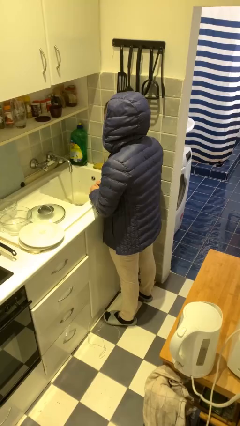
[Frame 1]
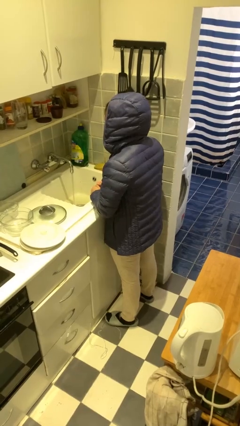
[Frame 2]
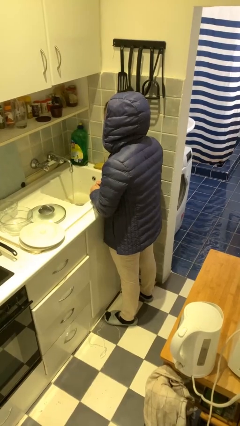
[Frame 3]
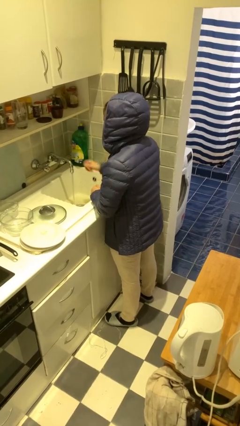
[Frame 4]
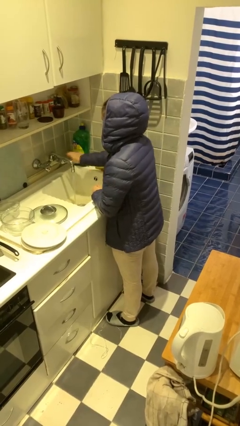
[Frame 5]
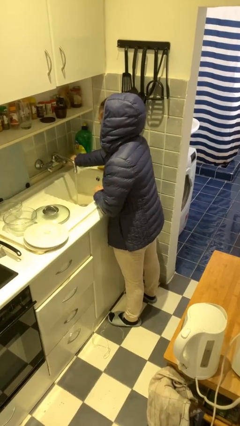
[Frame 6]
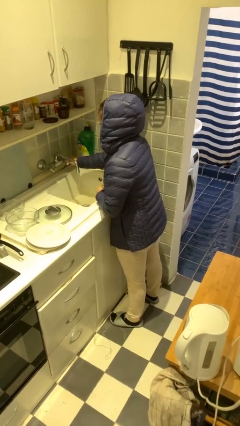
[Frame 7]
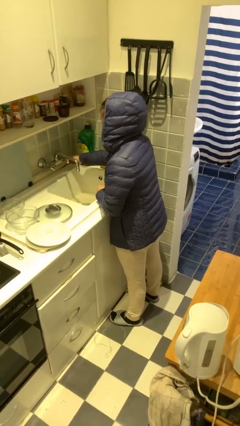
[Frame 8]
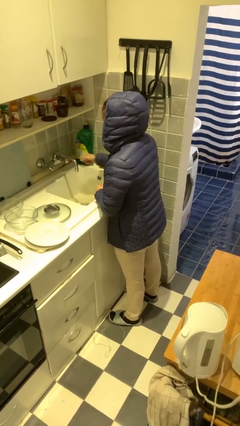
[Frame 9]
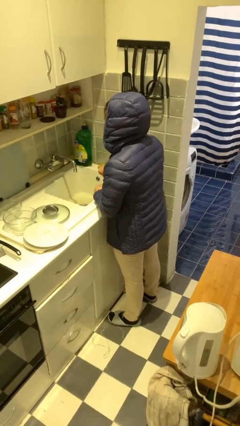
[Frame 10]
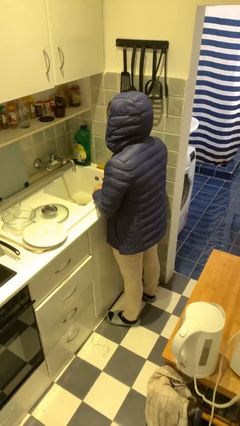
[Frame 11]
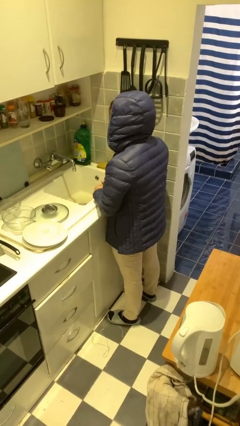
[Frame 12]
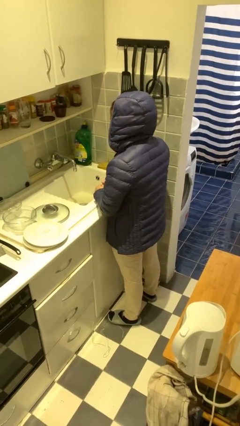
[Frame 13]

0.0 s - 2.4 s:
person turns off faucet

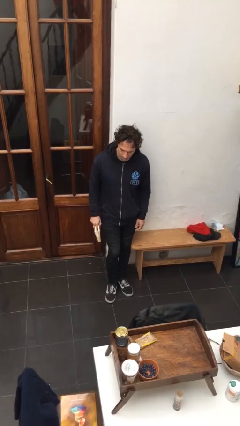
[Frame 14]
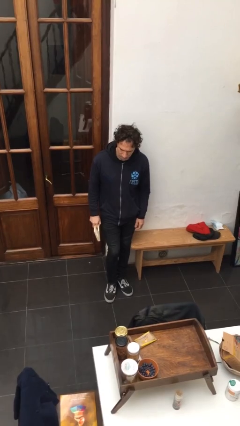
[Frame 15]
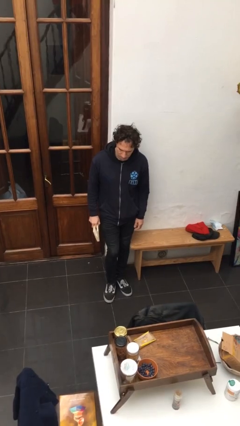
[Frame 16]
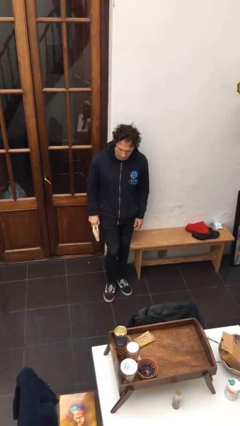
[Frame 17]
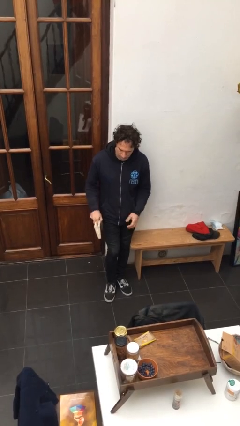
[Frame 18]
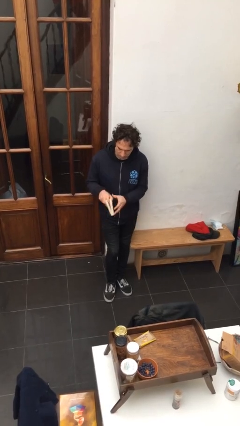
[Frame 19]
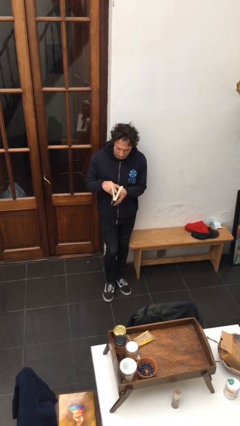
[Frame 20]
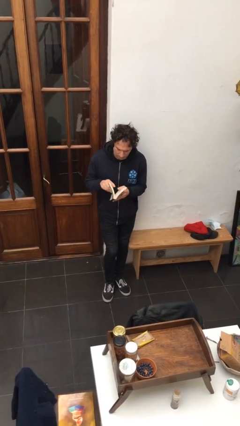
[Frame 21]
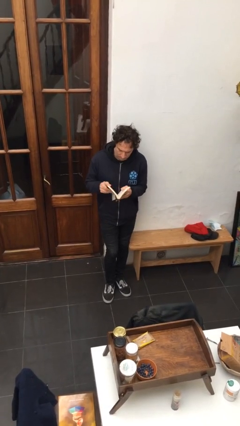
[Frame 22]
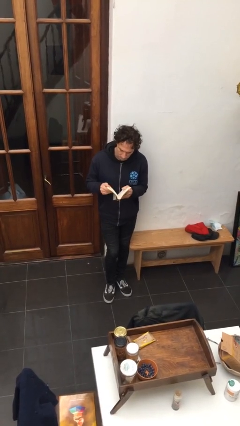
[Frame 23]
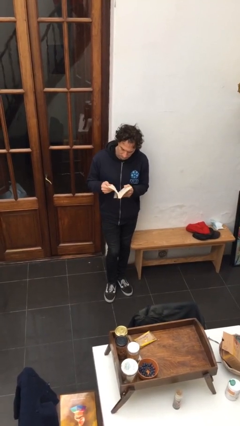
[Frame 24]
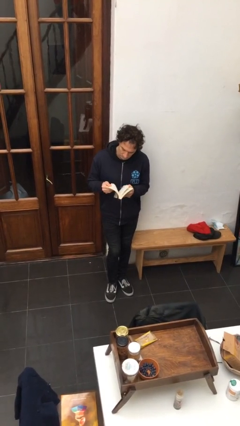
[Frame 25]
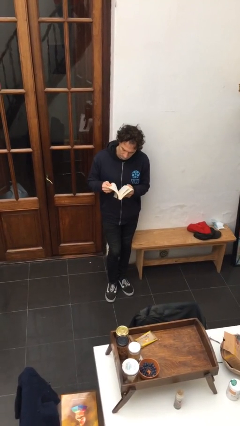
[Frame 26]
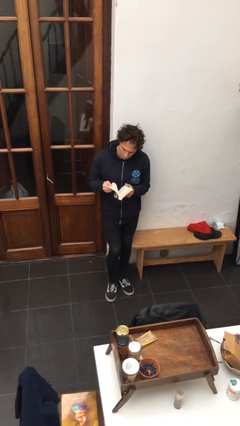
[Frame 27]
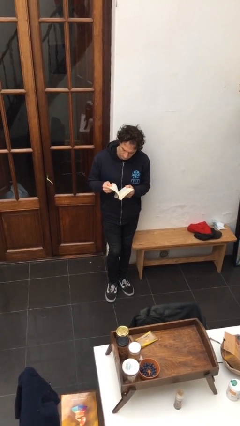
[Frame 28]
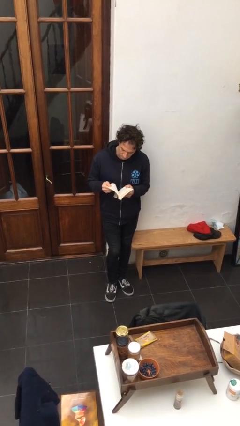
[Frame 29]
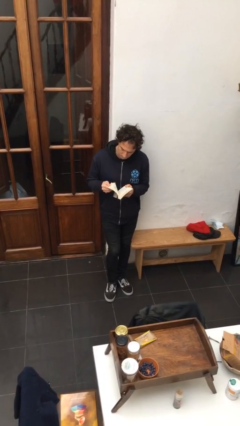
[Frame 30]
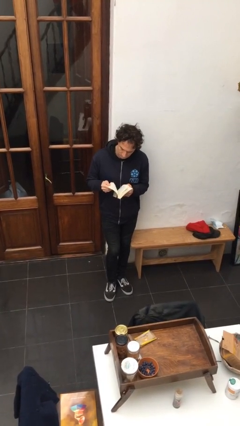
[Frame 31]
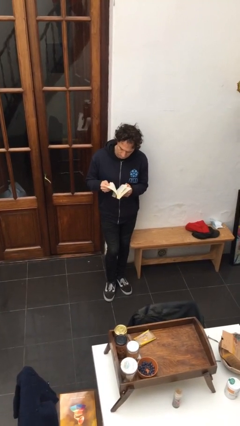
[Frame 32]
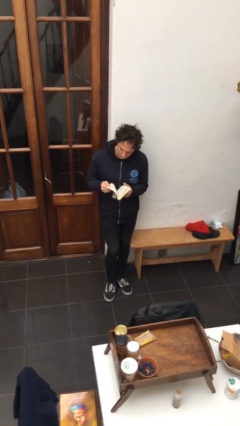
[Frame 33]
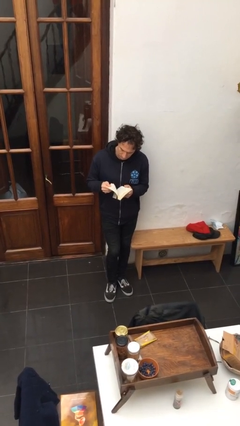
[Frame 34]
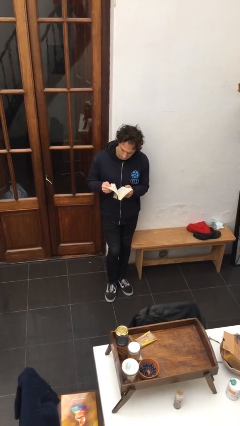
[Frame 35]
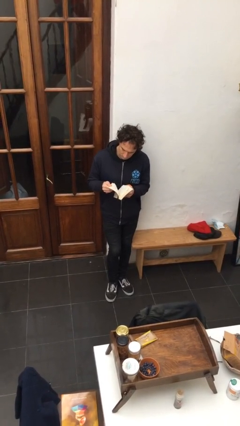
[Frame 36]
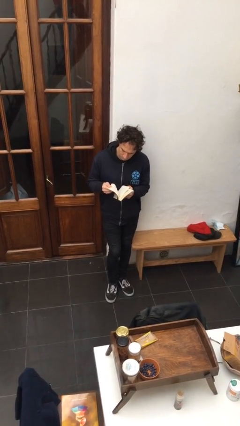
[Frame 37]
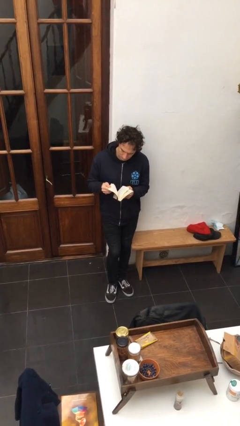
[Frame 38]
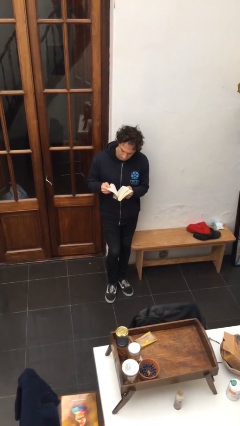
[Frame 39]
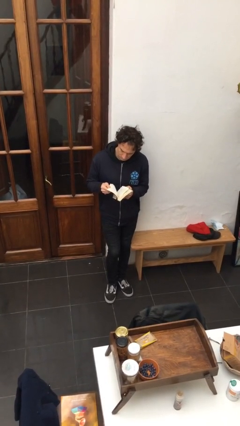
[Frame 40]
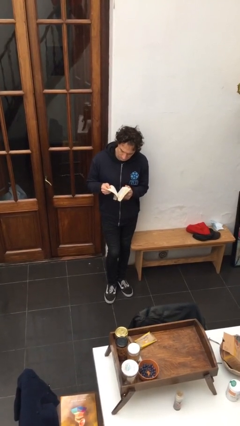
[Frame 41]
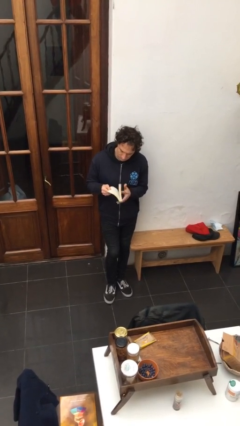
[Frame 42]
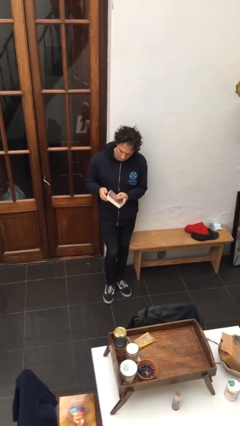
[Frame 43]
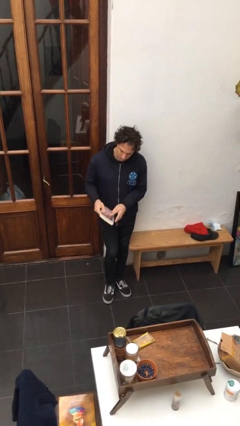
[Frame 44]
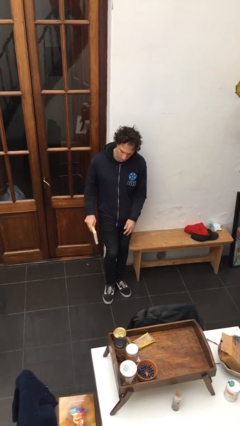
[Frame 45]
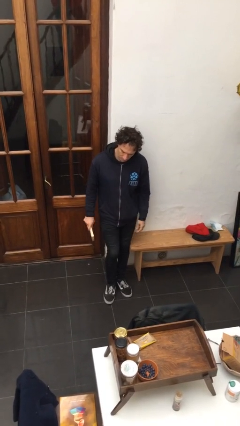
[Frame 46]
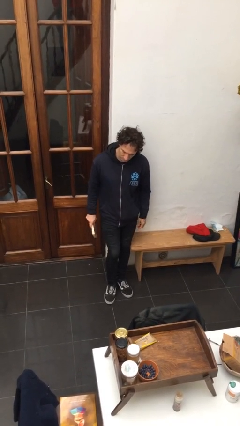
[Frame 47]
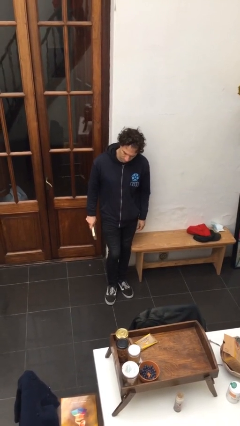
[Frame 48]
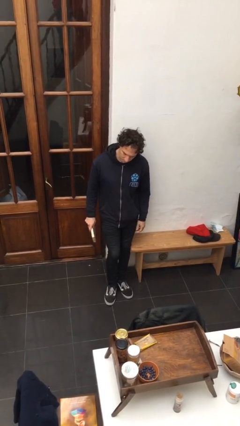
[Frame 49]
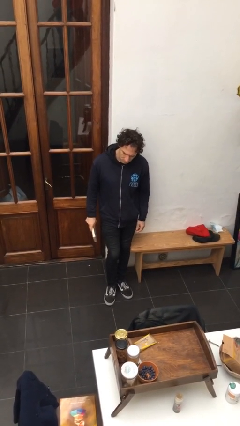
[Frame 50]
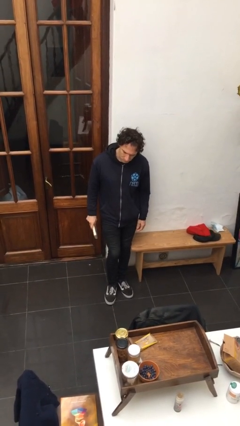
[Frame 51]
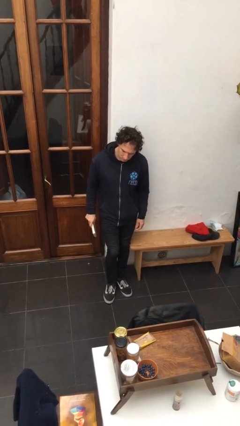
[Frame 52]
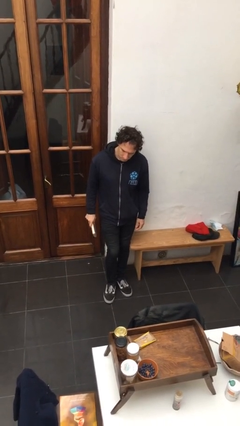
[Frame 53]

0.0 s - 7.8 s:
person reads book

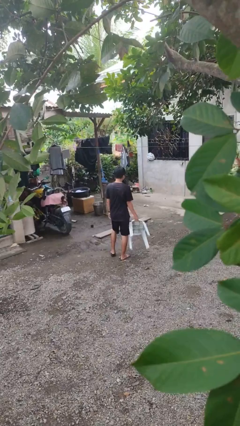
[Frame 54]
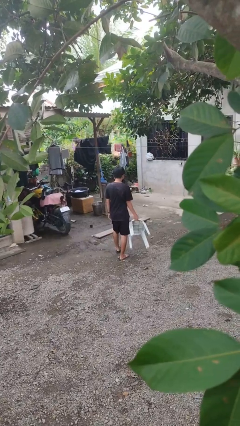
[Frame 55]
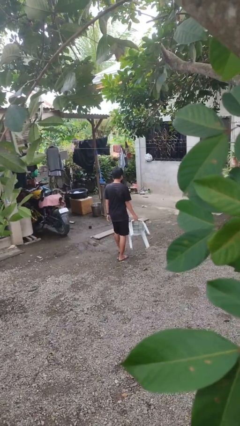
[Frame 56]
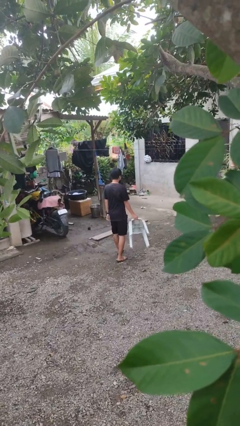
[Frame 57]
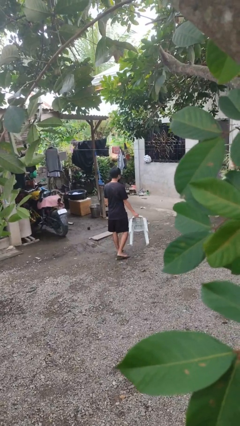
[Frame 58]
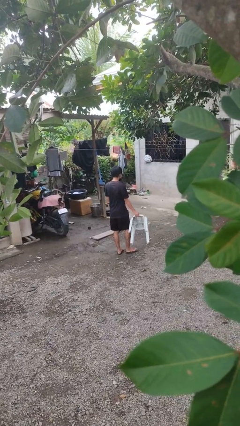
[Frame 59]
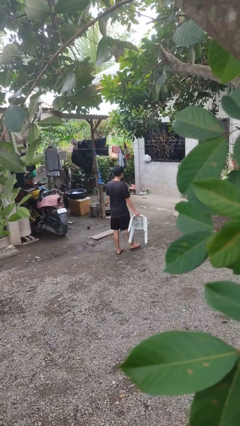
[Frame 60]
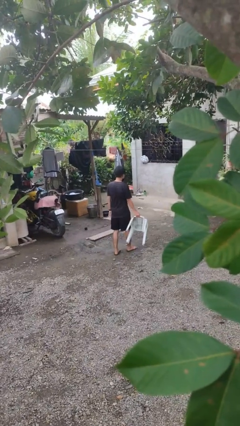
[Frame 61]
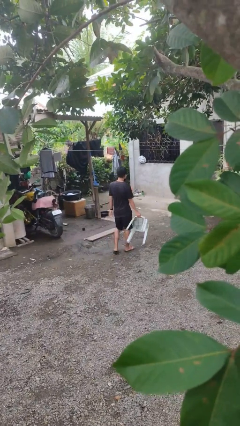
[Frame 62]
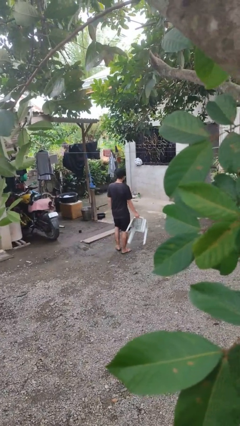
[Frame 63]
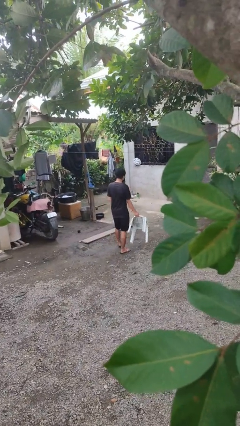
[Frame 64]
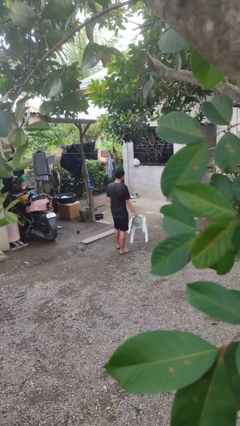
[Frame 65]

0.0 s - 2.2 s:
person carries furniture

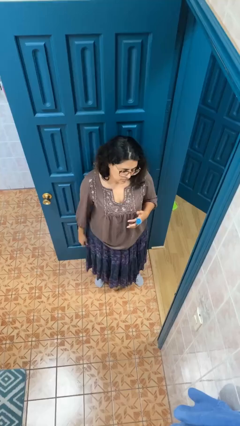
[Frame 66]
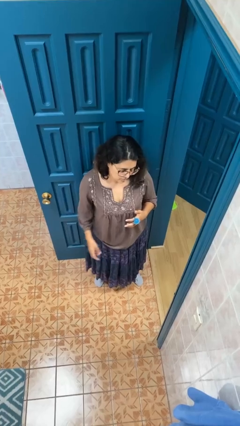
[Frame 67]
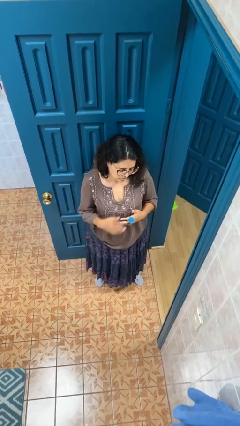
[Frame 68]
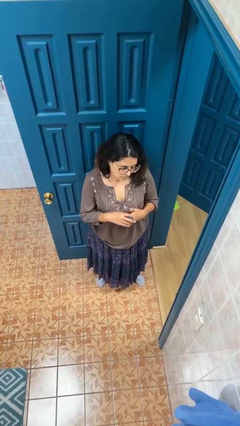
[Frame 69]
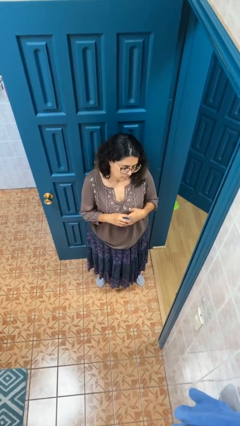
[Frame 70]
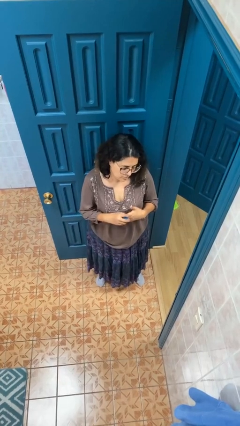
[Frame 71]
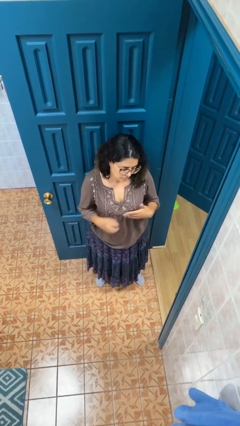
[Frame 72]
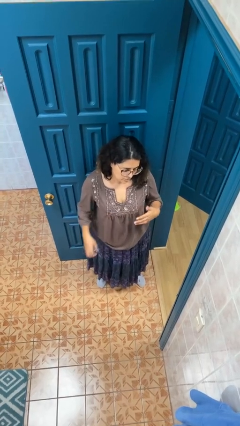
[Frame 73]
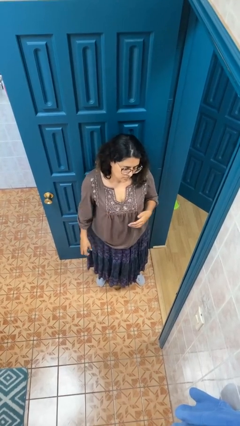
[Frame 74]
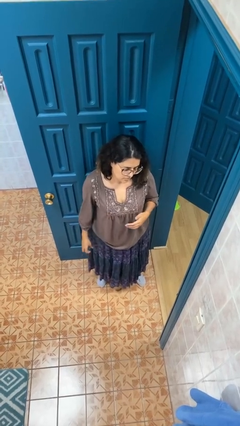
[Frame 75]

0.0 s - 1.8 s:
person takes off ring

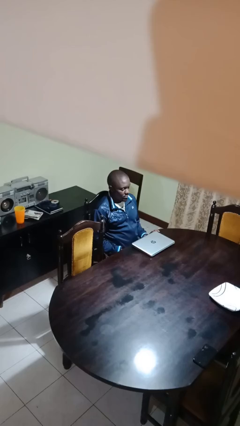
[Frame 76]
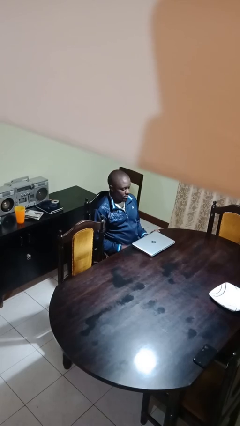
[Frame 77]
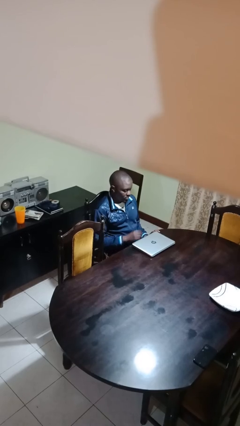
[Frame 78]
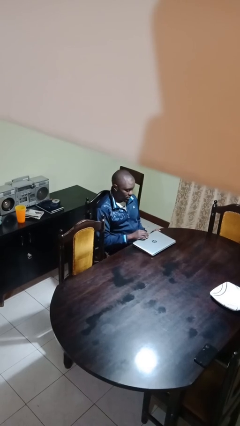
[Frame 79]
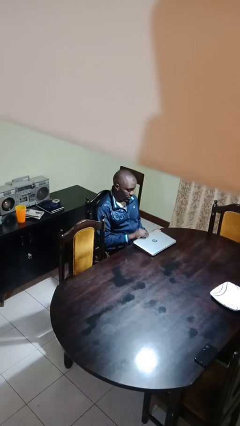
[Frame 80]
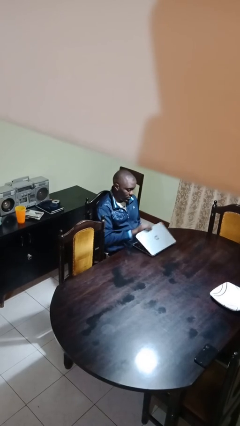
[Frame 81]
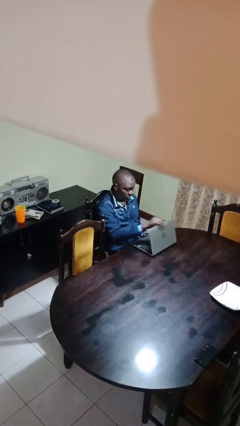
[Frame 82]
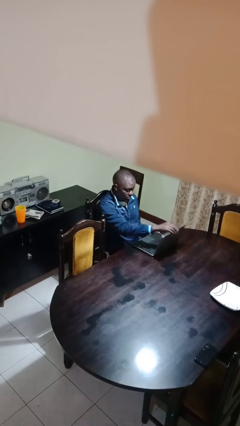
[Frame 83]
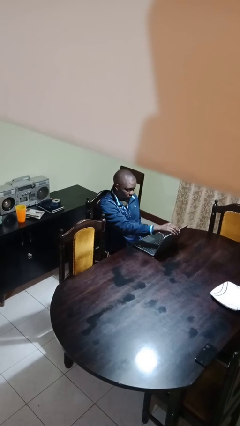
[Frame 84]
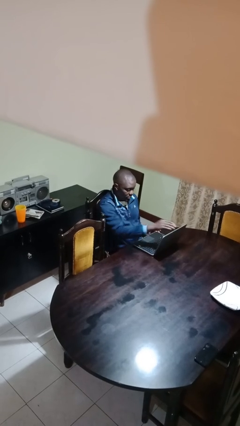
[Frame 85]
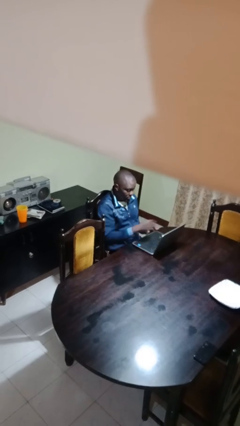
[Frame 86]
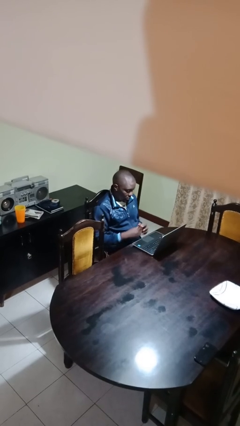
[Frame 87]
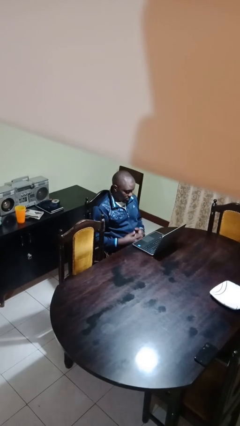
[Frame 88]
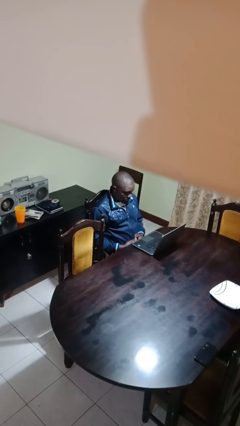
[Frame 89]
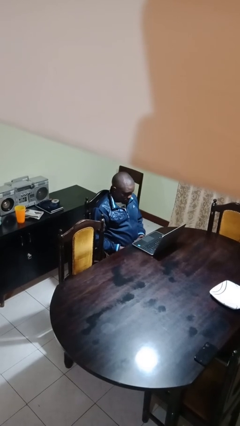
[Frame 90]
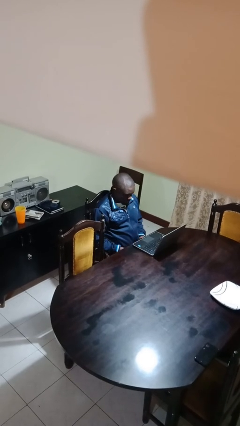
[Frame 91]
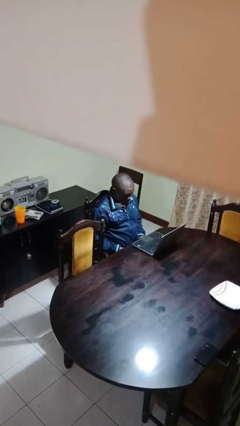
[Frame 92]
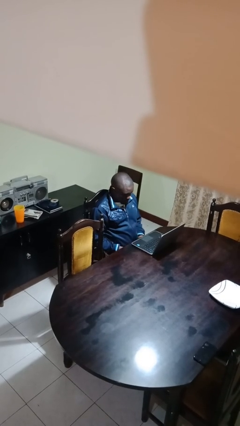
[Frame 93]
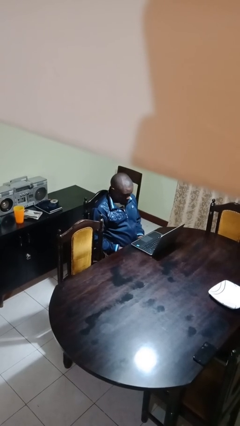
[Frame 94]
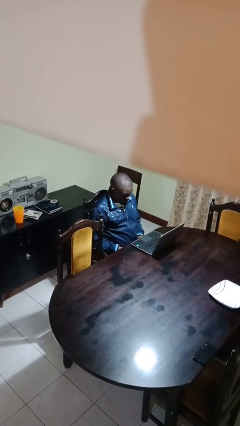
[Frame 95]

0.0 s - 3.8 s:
person opens laptop
